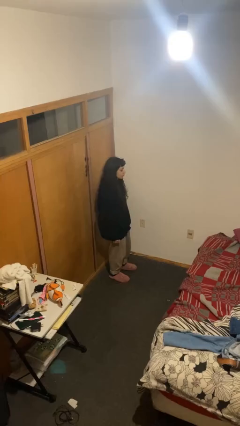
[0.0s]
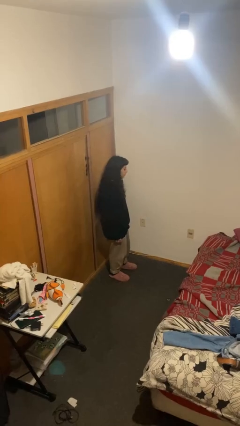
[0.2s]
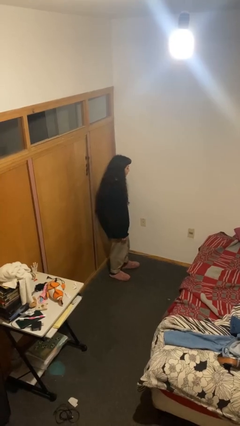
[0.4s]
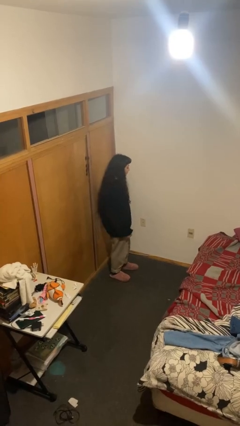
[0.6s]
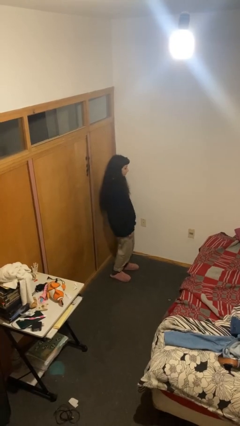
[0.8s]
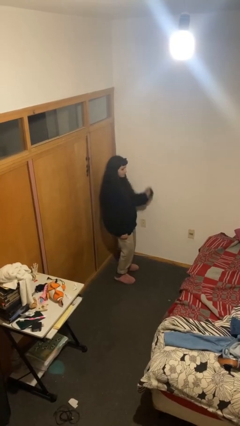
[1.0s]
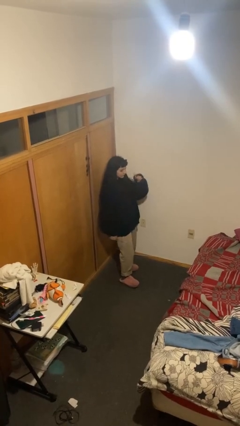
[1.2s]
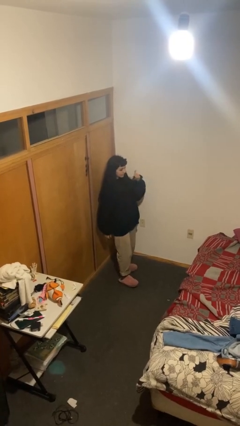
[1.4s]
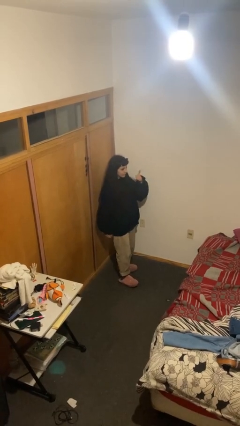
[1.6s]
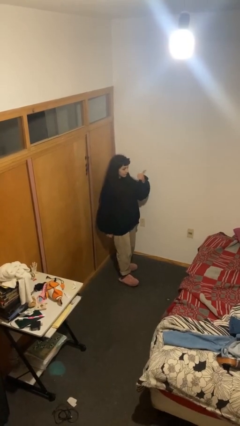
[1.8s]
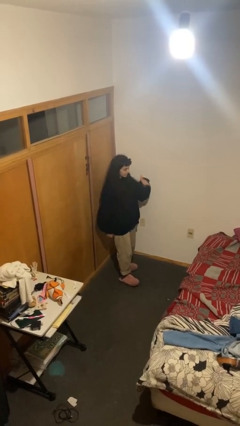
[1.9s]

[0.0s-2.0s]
person gestures hang loose

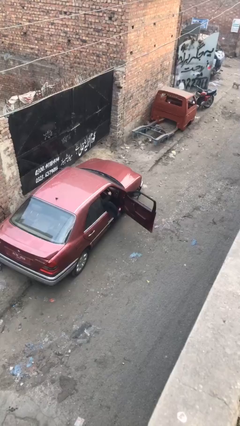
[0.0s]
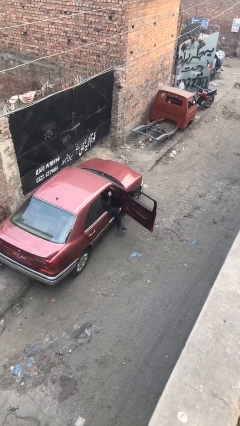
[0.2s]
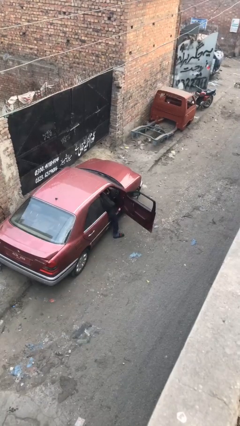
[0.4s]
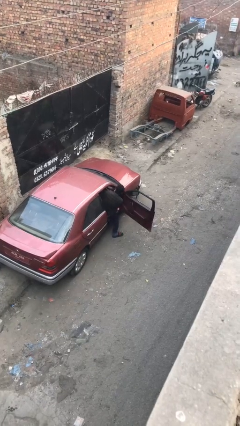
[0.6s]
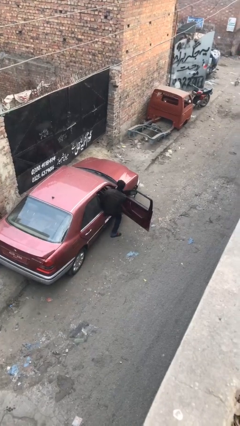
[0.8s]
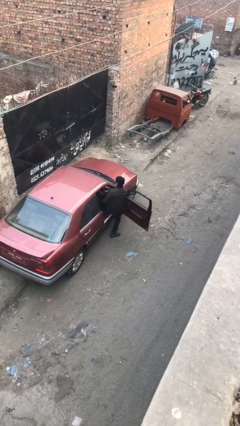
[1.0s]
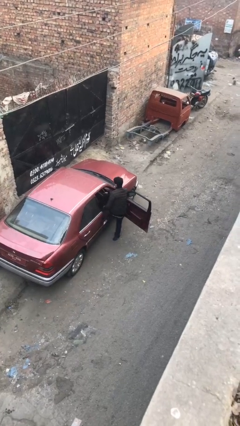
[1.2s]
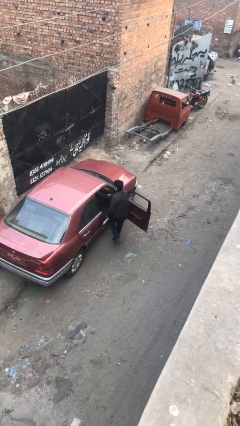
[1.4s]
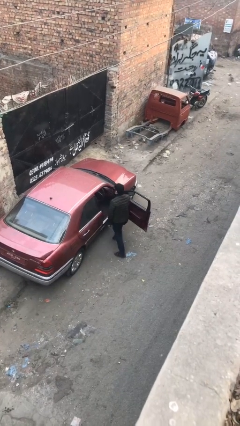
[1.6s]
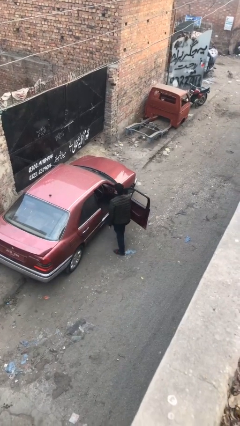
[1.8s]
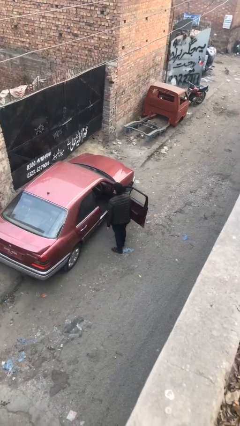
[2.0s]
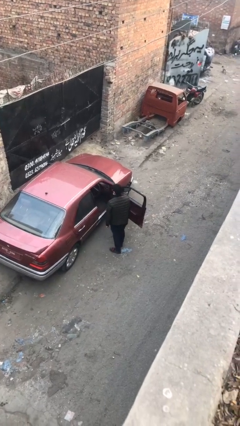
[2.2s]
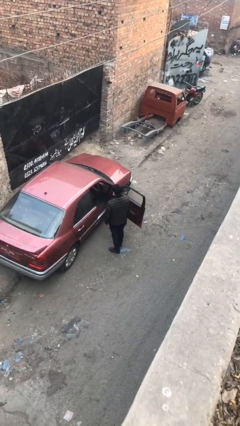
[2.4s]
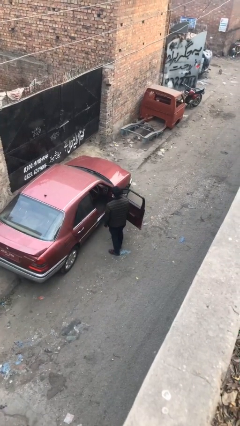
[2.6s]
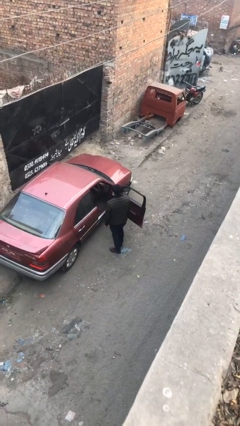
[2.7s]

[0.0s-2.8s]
person exits car

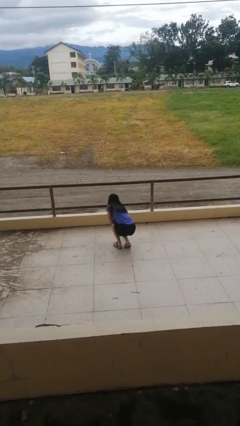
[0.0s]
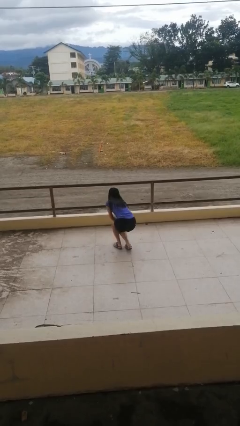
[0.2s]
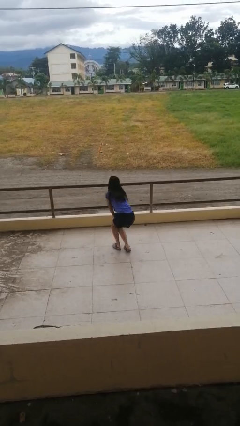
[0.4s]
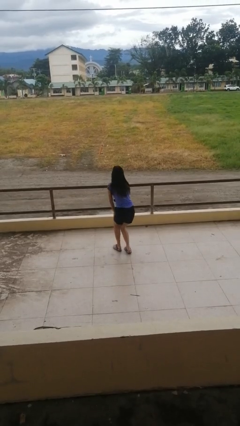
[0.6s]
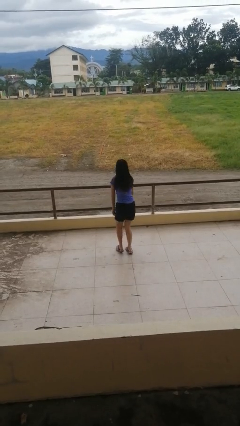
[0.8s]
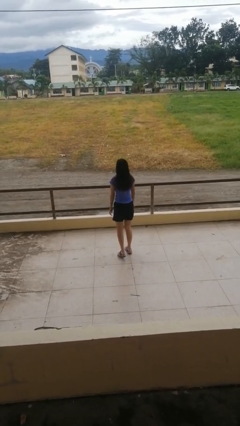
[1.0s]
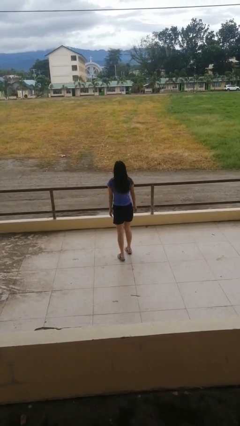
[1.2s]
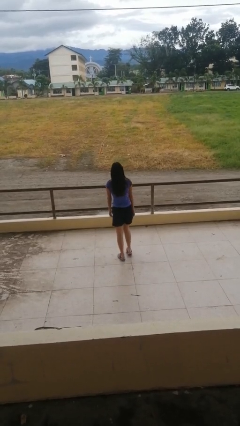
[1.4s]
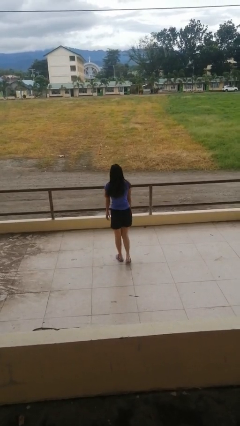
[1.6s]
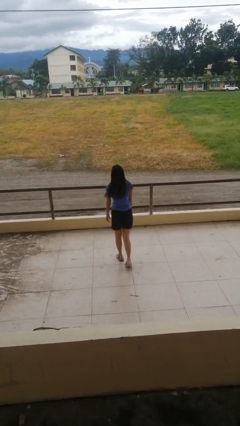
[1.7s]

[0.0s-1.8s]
person stands up from floor

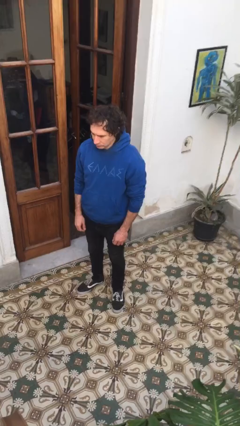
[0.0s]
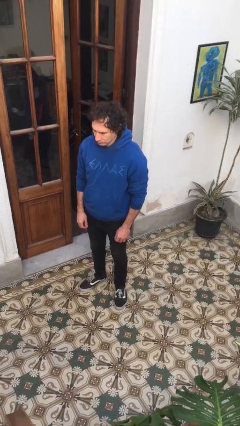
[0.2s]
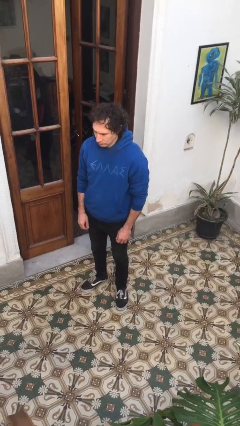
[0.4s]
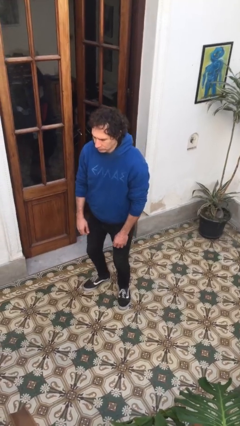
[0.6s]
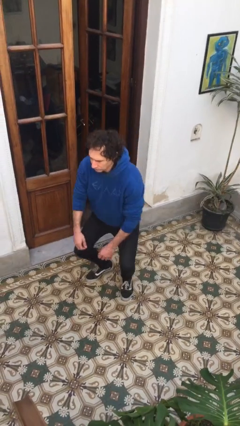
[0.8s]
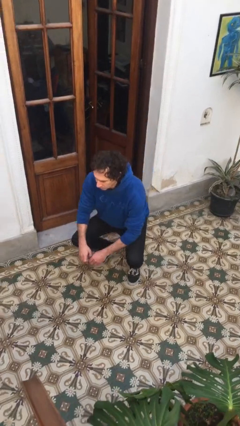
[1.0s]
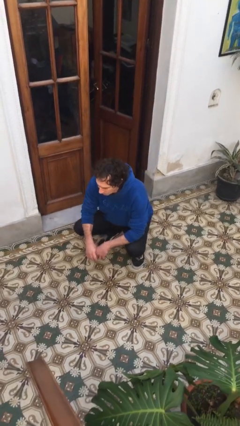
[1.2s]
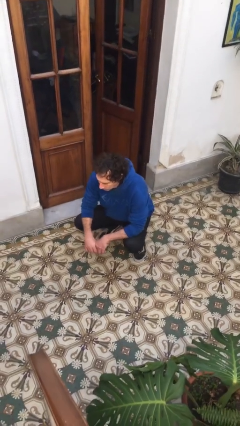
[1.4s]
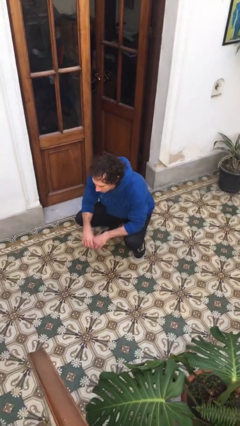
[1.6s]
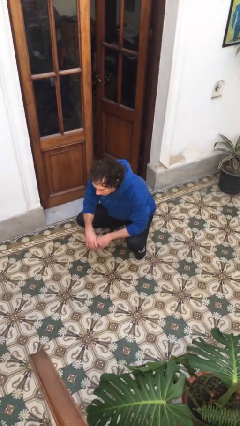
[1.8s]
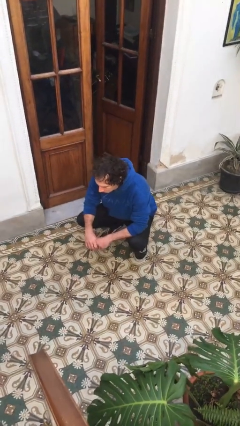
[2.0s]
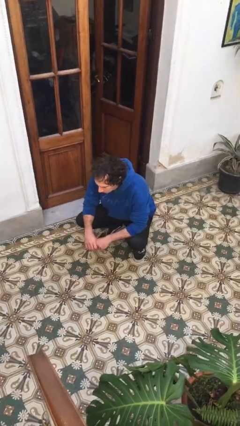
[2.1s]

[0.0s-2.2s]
person squats

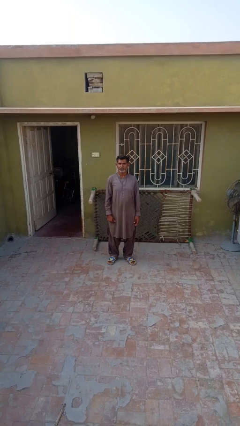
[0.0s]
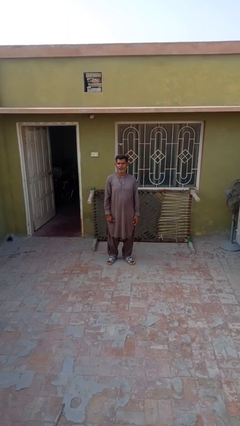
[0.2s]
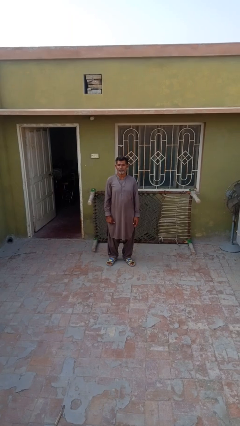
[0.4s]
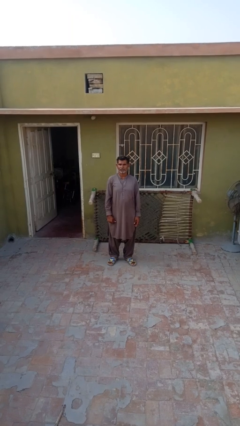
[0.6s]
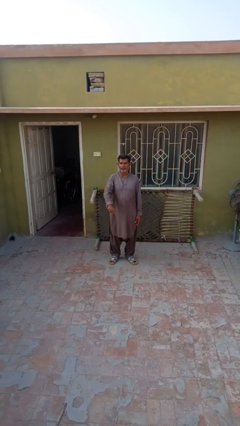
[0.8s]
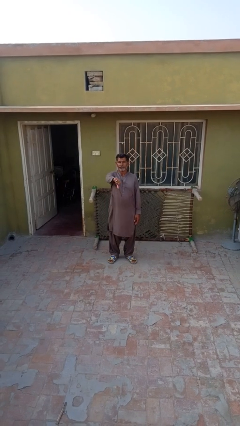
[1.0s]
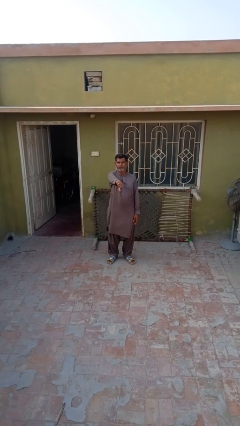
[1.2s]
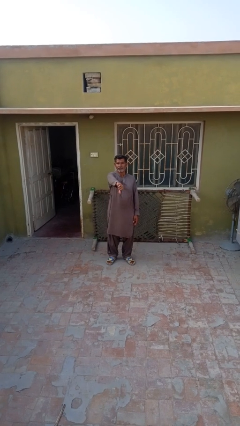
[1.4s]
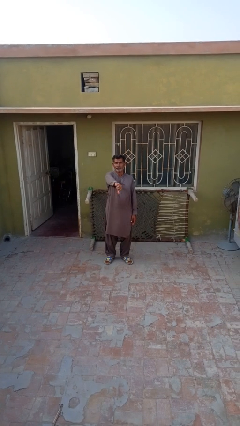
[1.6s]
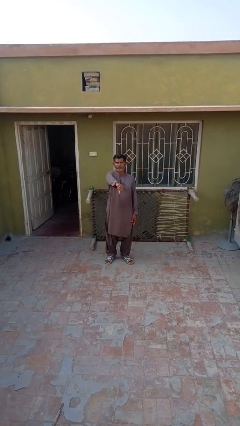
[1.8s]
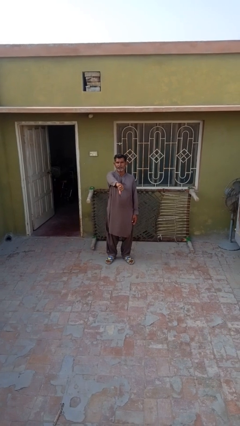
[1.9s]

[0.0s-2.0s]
person gestures thumbs down

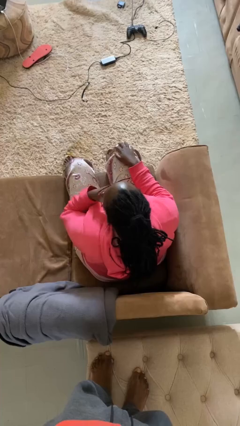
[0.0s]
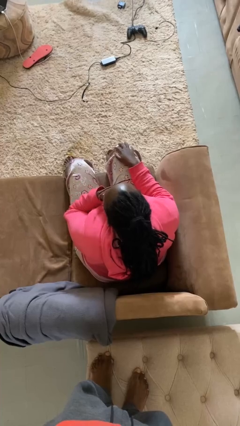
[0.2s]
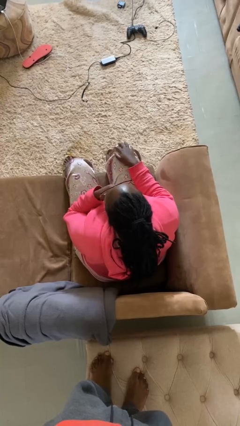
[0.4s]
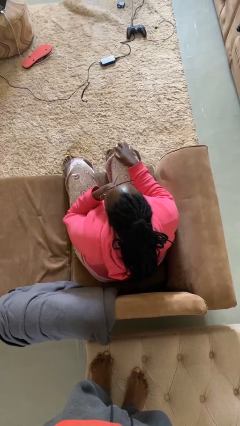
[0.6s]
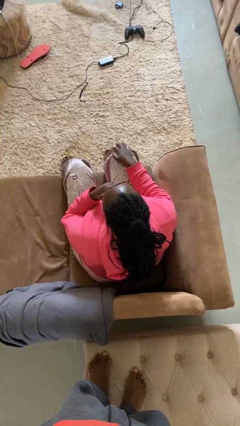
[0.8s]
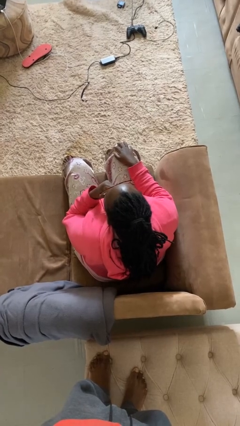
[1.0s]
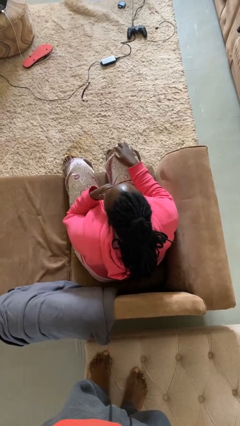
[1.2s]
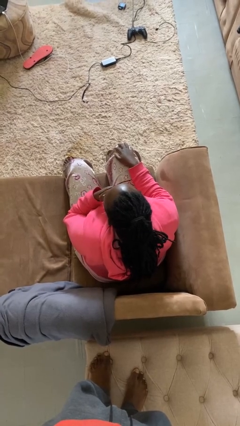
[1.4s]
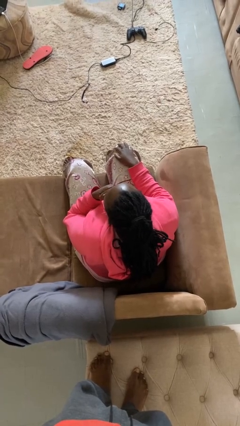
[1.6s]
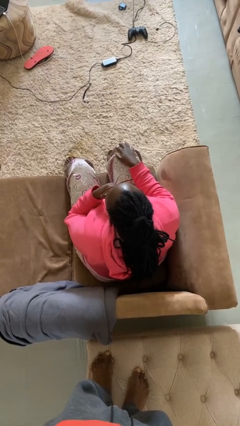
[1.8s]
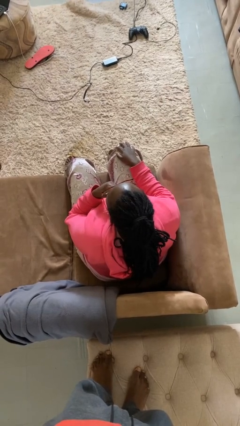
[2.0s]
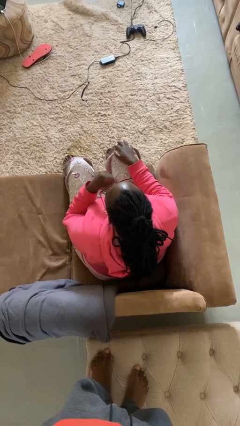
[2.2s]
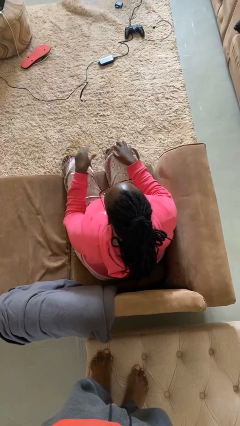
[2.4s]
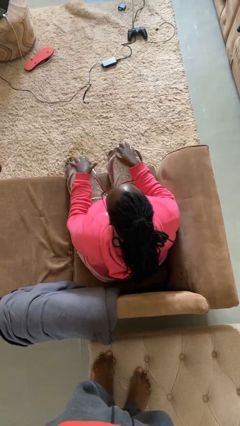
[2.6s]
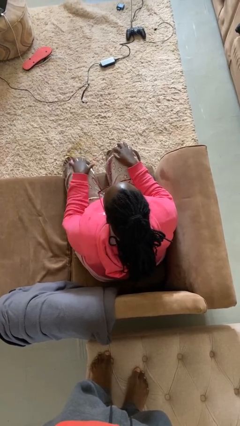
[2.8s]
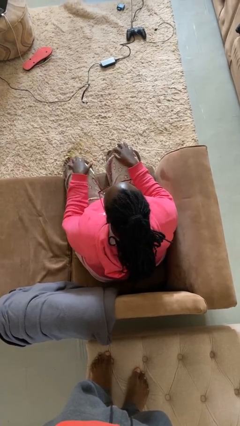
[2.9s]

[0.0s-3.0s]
person strokes chin

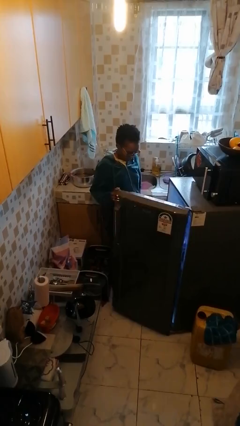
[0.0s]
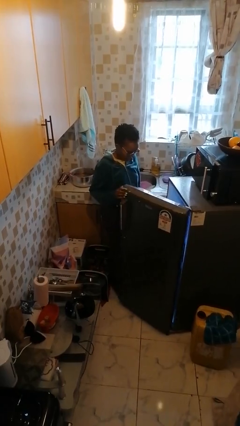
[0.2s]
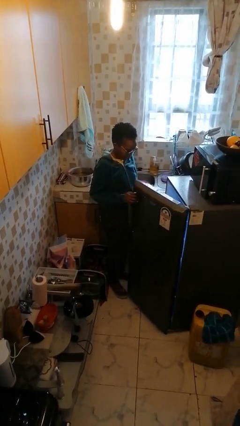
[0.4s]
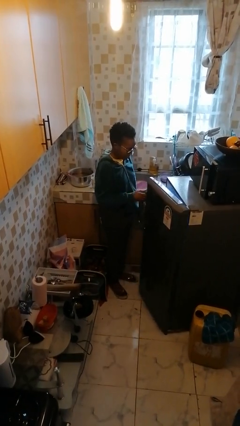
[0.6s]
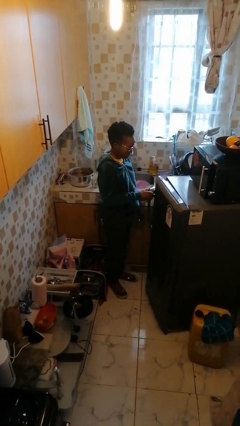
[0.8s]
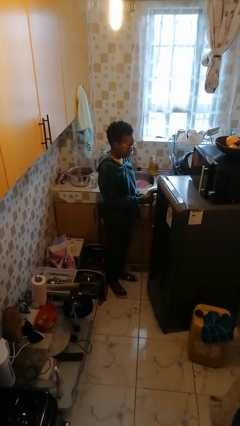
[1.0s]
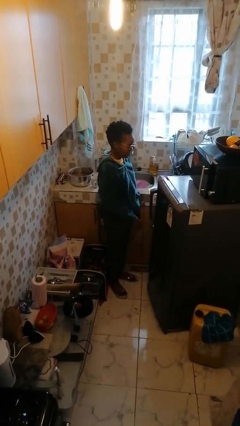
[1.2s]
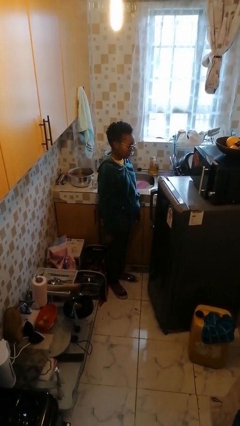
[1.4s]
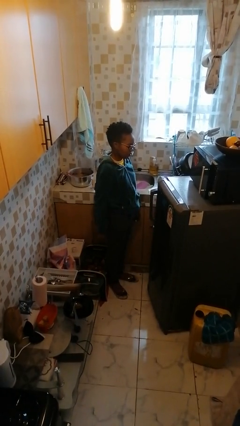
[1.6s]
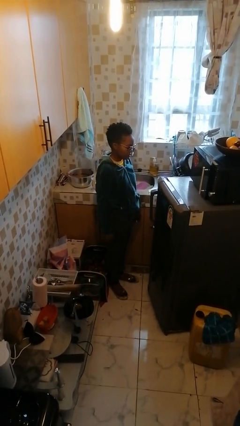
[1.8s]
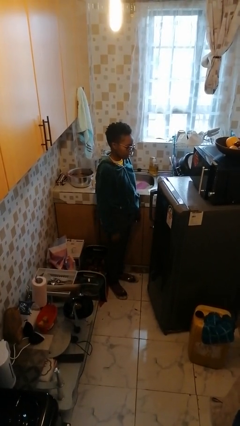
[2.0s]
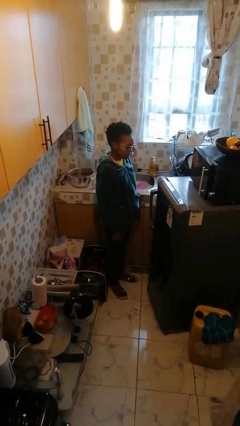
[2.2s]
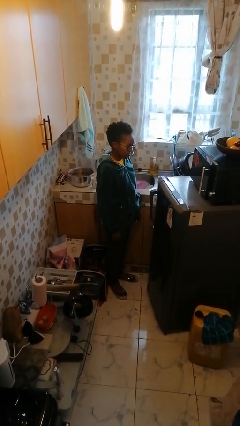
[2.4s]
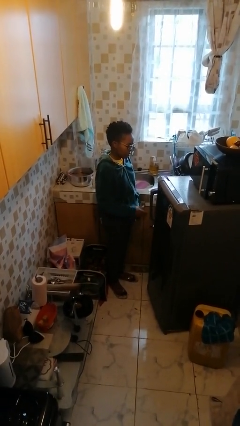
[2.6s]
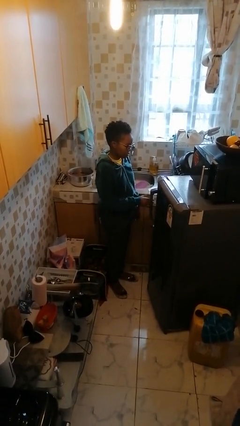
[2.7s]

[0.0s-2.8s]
person closes refrigerator

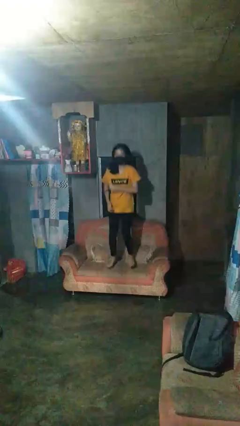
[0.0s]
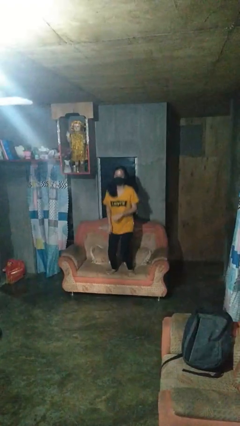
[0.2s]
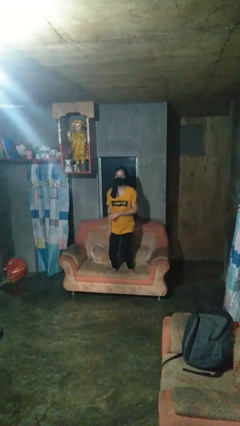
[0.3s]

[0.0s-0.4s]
person jumps on couch
